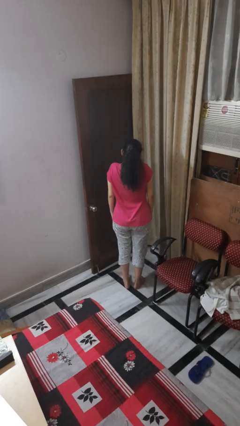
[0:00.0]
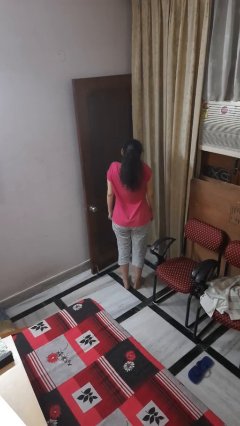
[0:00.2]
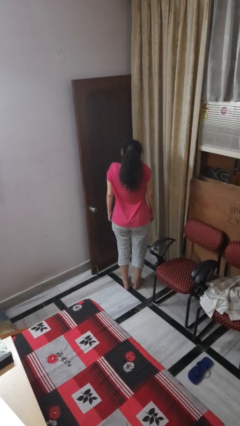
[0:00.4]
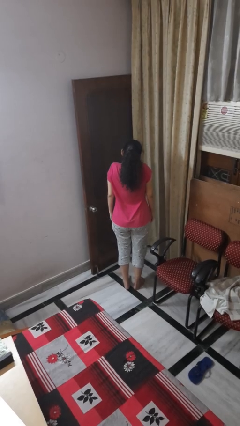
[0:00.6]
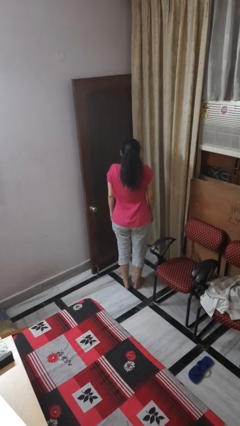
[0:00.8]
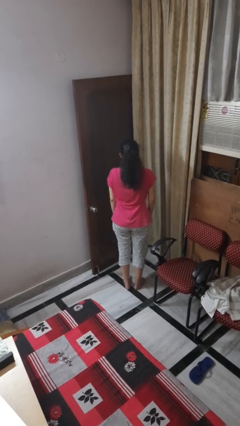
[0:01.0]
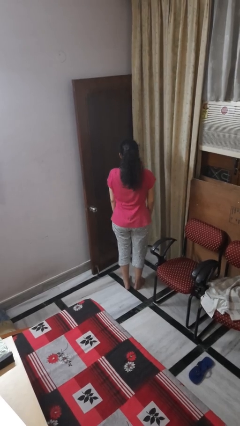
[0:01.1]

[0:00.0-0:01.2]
person shrugs

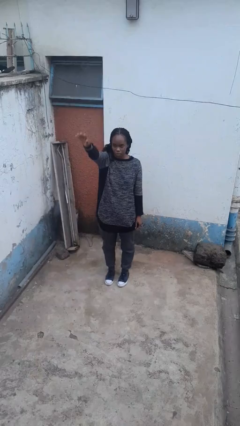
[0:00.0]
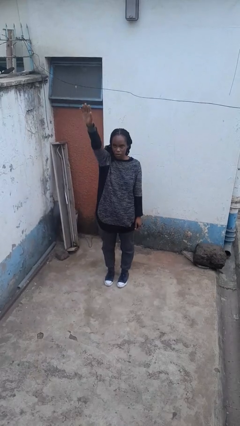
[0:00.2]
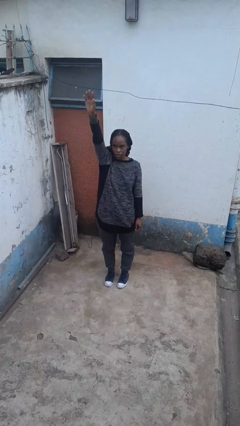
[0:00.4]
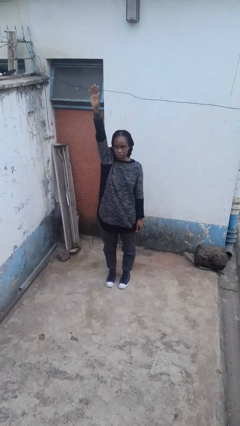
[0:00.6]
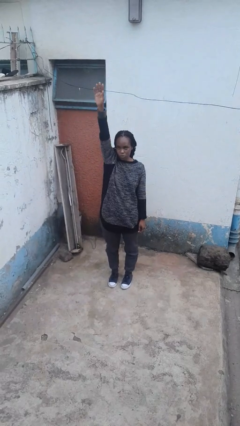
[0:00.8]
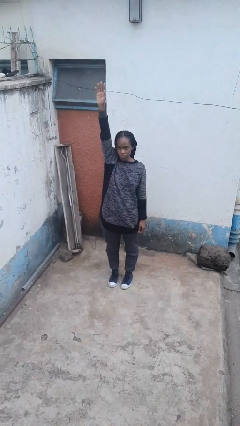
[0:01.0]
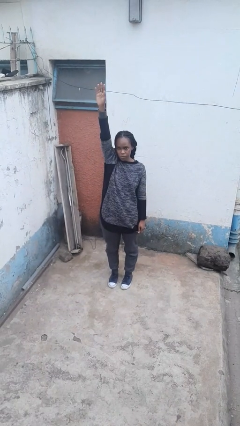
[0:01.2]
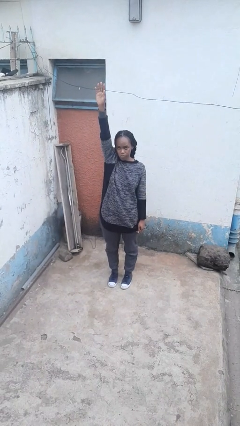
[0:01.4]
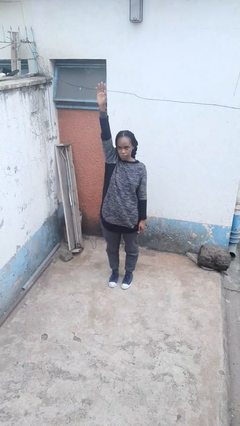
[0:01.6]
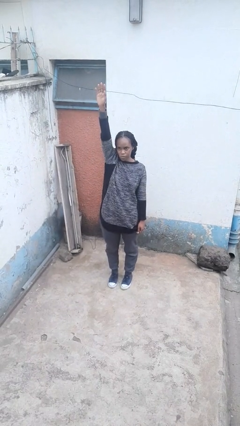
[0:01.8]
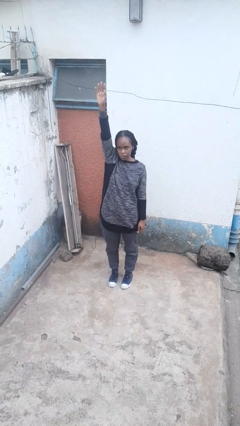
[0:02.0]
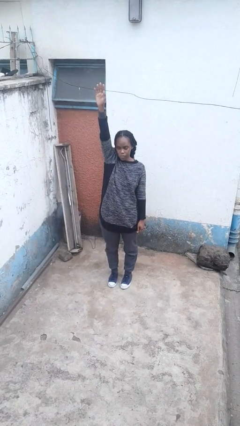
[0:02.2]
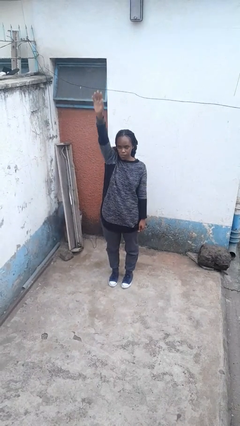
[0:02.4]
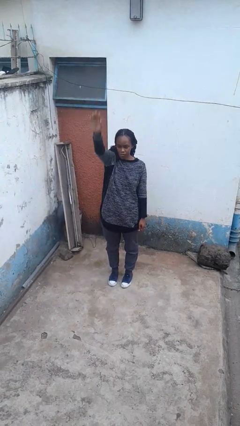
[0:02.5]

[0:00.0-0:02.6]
person gestures raise hand

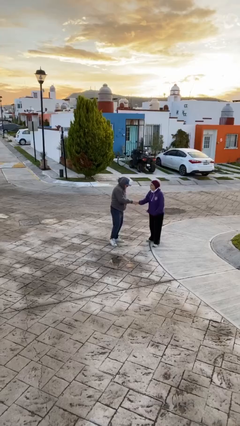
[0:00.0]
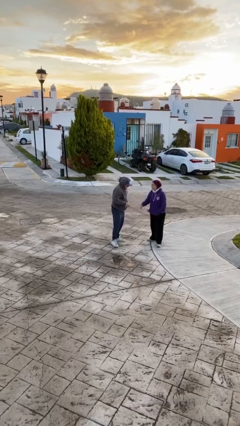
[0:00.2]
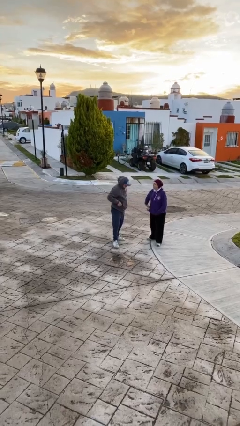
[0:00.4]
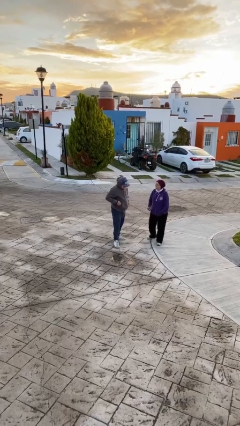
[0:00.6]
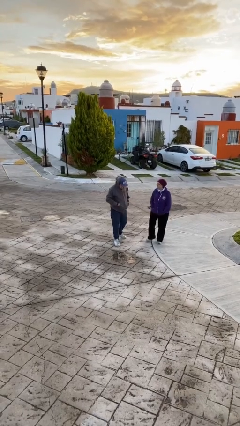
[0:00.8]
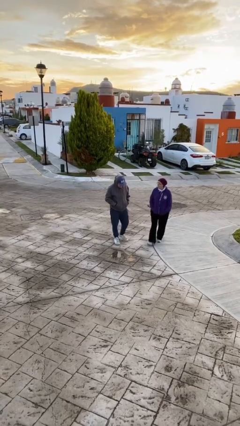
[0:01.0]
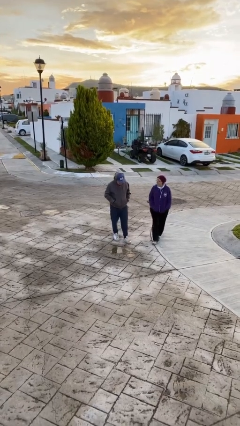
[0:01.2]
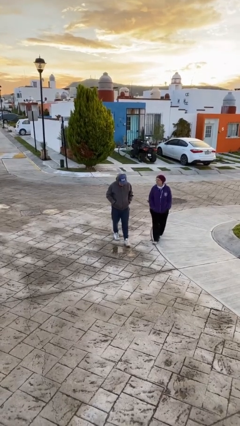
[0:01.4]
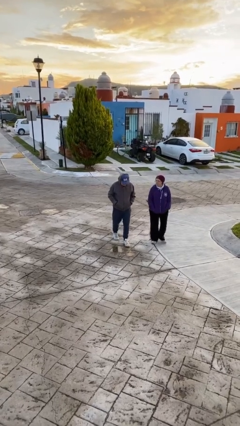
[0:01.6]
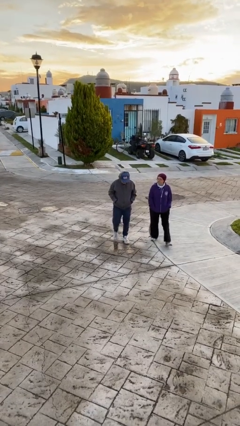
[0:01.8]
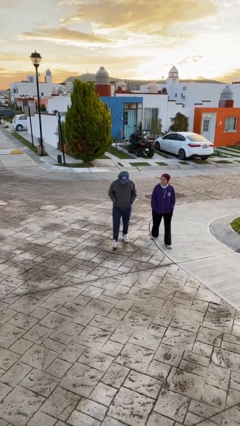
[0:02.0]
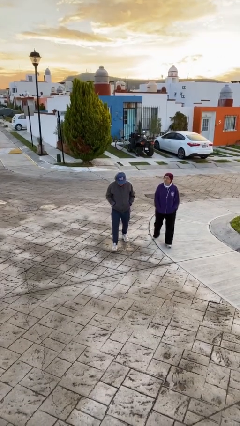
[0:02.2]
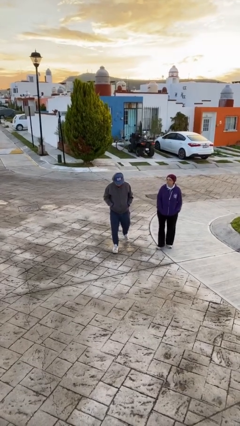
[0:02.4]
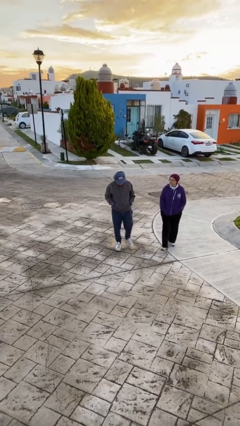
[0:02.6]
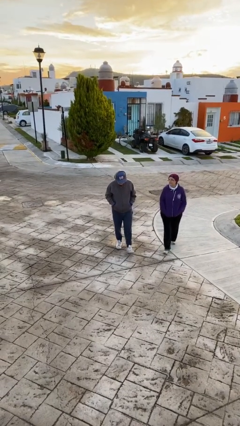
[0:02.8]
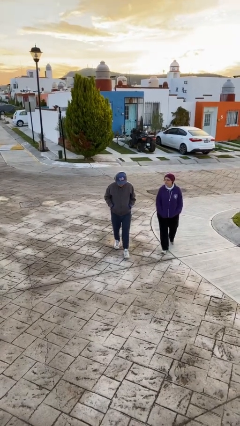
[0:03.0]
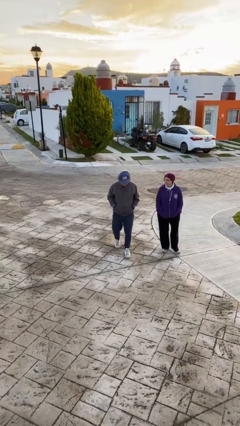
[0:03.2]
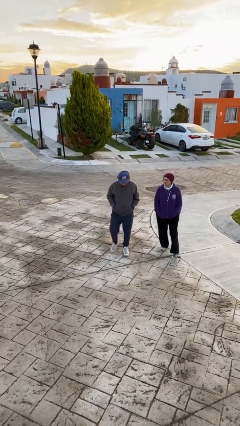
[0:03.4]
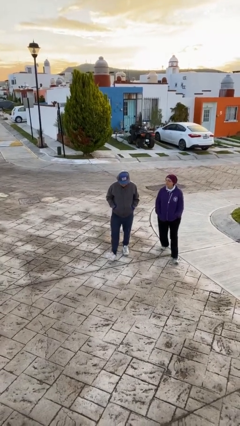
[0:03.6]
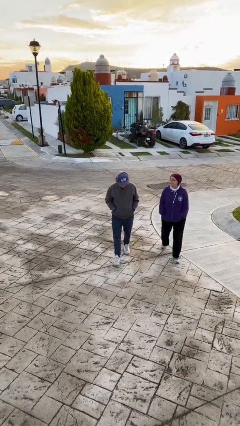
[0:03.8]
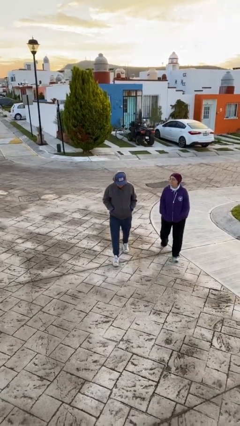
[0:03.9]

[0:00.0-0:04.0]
person talks to person

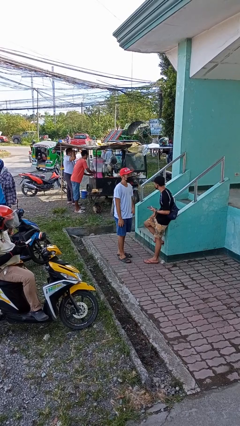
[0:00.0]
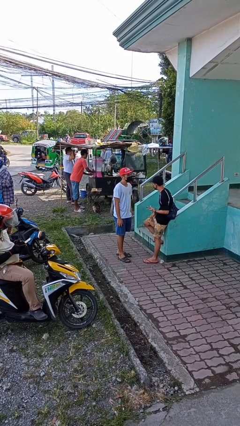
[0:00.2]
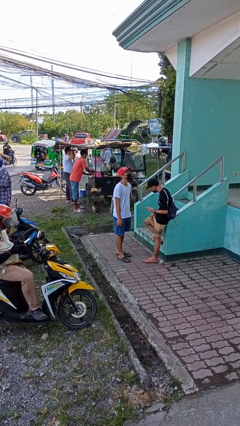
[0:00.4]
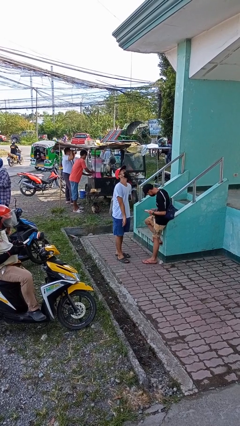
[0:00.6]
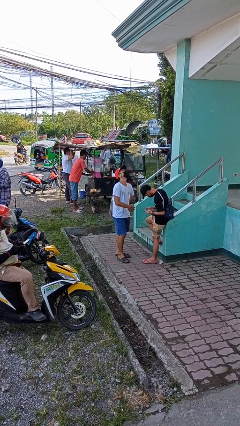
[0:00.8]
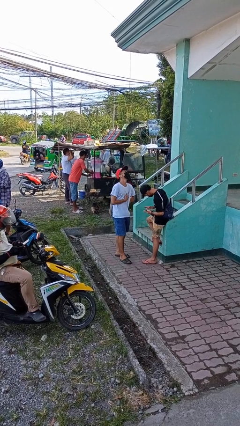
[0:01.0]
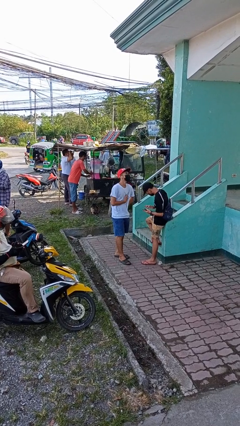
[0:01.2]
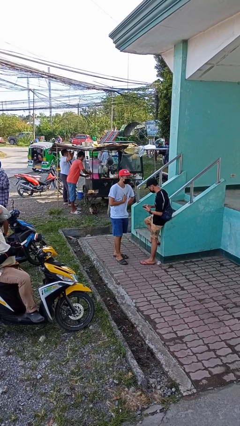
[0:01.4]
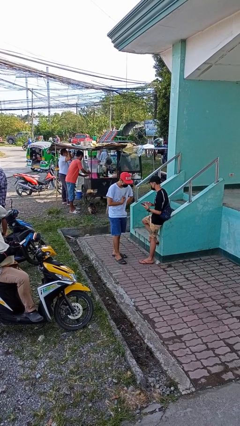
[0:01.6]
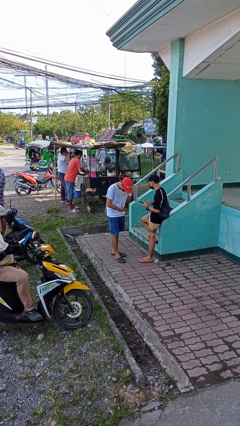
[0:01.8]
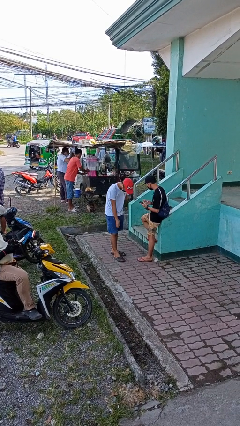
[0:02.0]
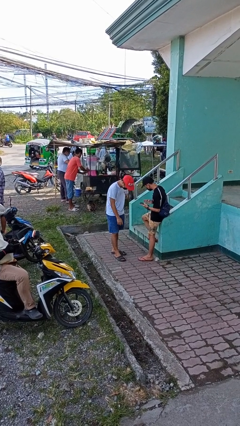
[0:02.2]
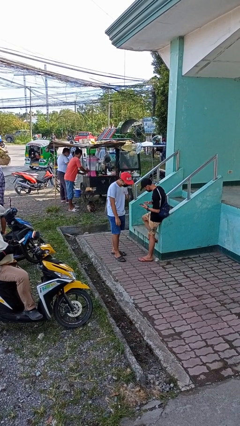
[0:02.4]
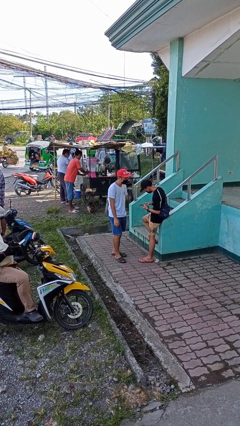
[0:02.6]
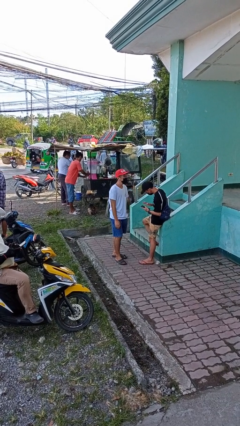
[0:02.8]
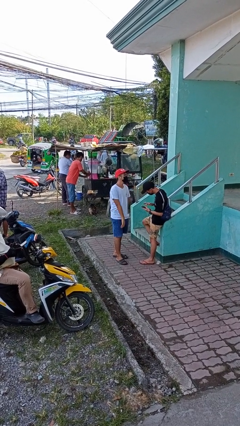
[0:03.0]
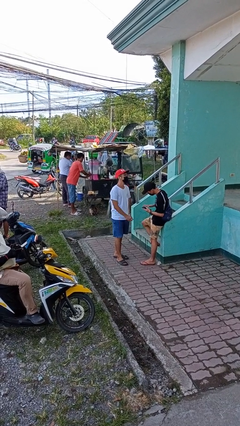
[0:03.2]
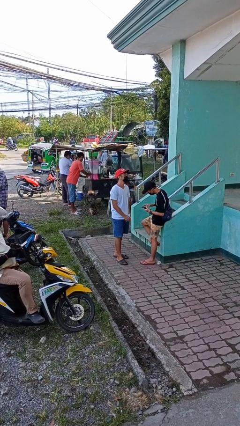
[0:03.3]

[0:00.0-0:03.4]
person laughs with person

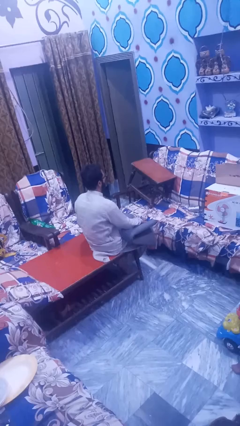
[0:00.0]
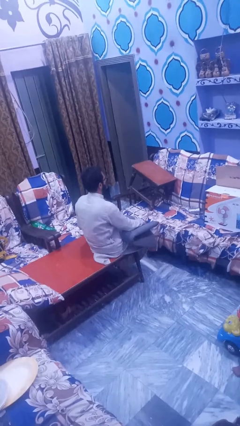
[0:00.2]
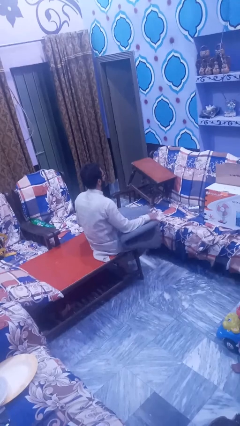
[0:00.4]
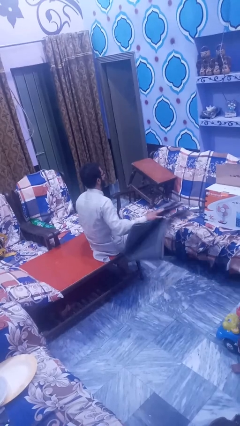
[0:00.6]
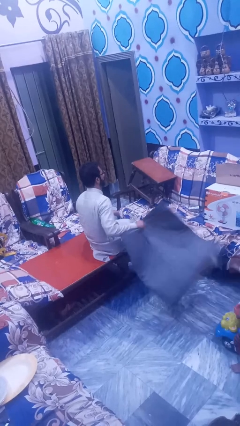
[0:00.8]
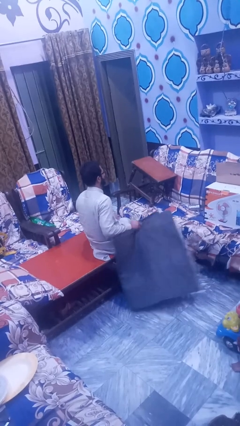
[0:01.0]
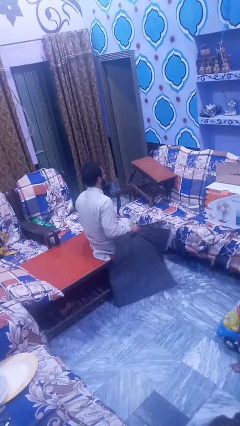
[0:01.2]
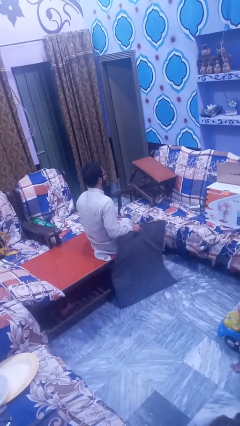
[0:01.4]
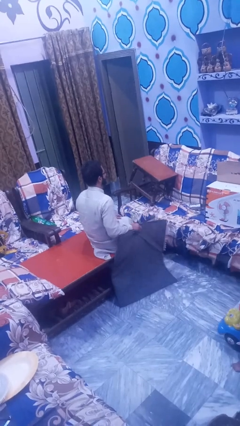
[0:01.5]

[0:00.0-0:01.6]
person unfolds blanket

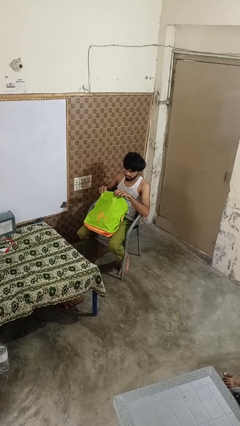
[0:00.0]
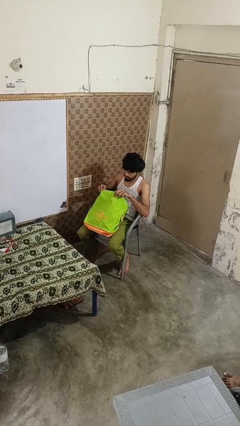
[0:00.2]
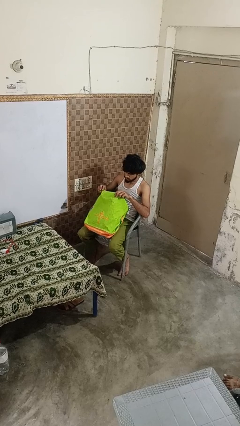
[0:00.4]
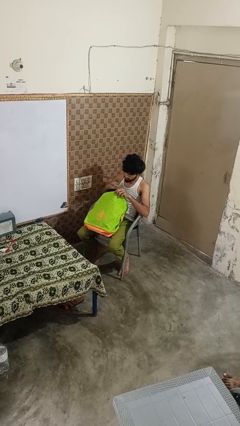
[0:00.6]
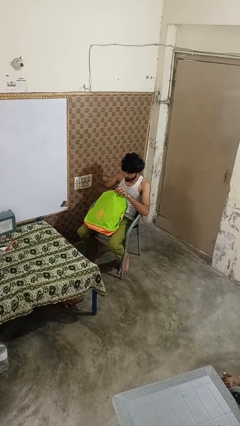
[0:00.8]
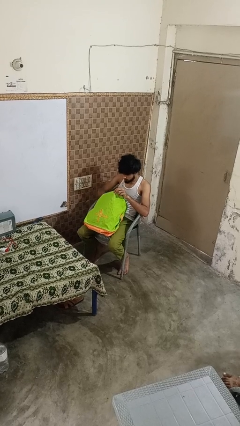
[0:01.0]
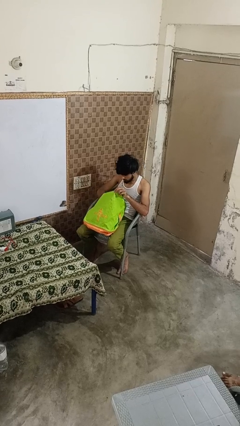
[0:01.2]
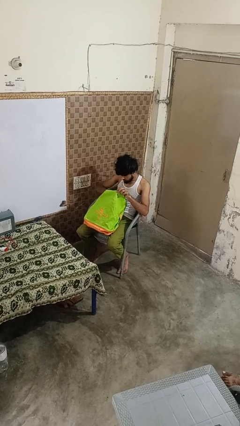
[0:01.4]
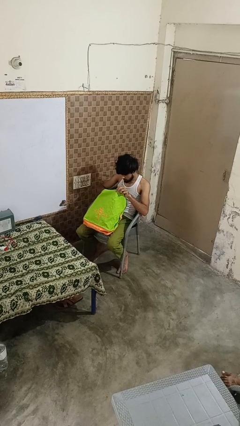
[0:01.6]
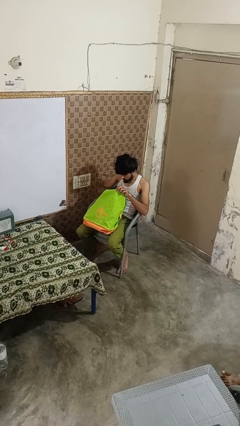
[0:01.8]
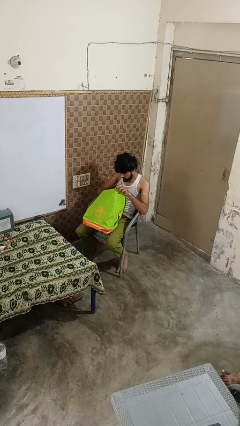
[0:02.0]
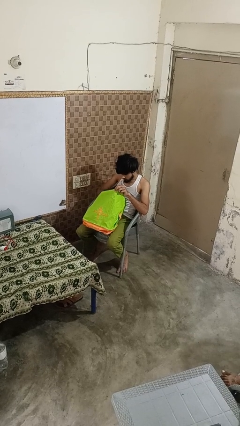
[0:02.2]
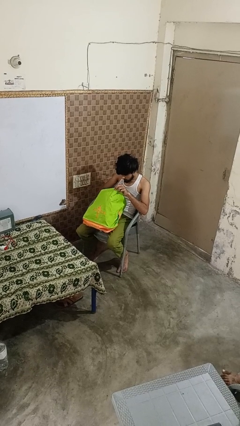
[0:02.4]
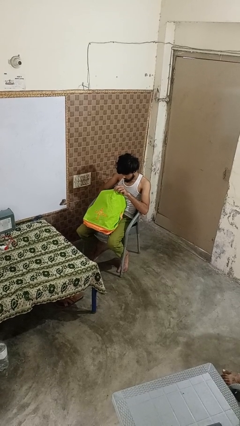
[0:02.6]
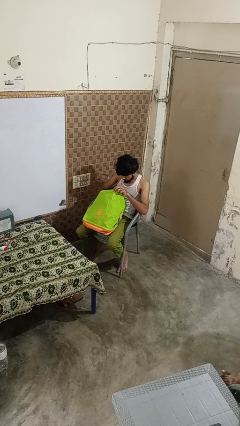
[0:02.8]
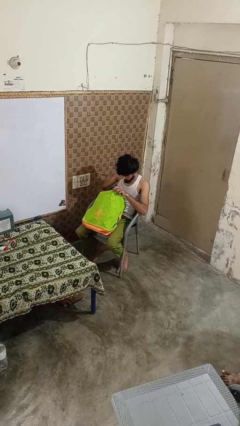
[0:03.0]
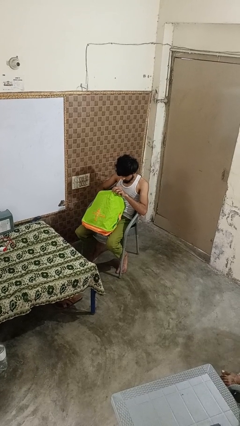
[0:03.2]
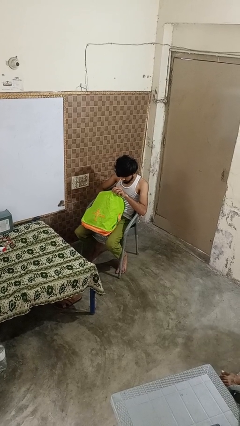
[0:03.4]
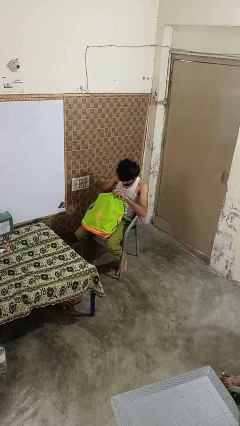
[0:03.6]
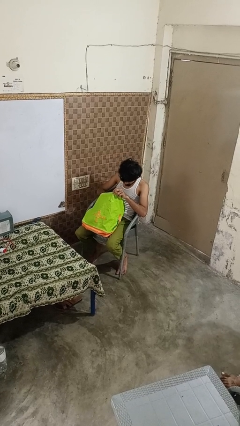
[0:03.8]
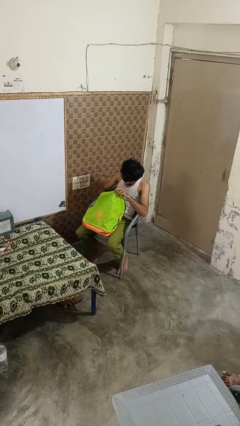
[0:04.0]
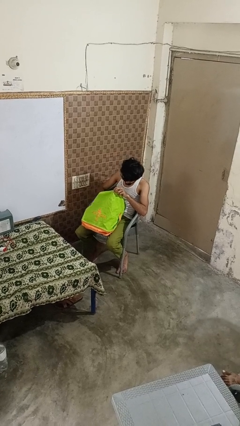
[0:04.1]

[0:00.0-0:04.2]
person searches in bag

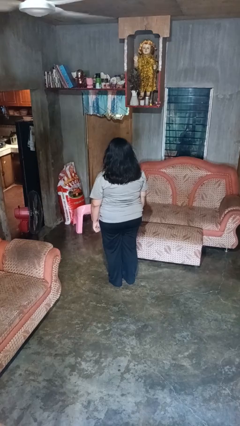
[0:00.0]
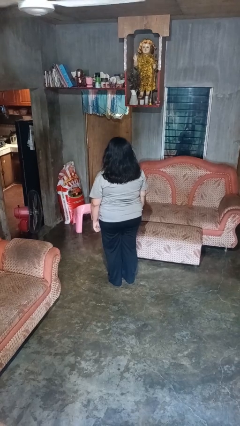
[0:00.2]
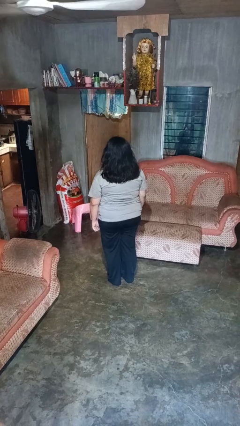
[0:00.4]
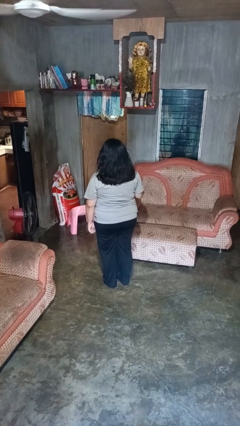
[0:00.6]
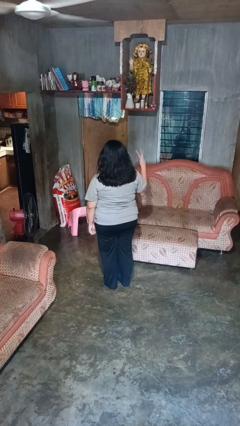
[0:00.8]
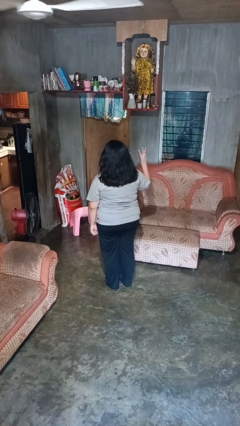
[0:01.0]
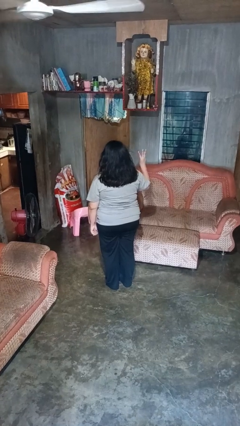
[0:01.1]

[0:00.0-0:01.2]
person gestures number three
